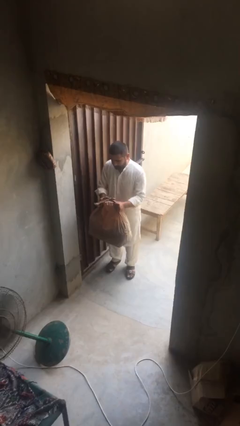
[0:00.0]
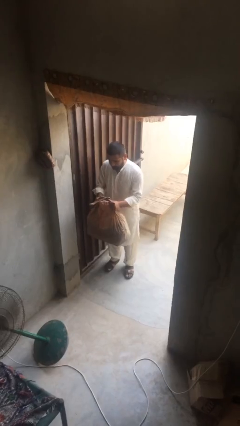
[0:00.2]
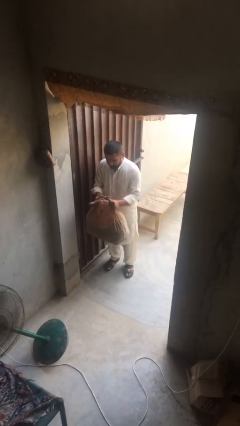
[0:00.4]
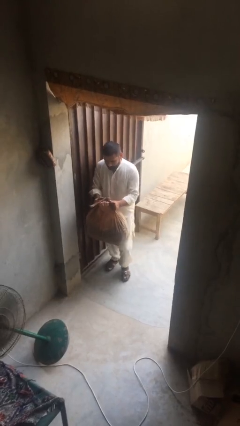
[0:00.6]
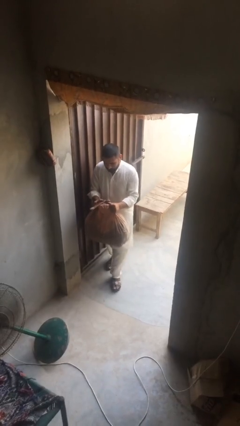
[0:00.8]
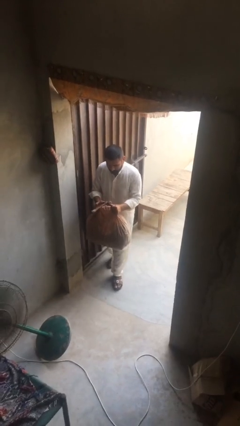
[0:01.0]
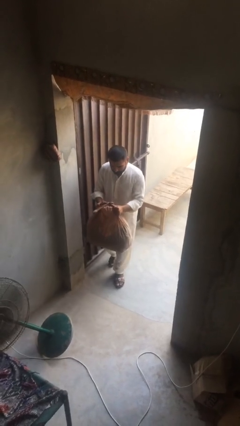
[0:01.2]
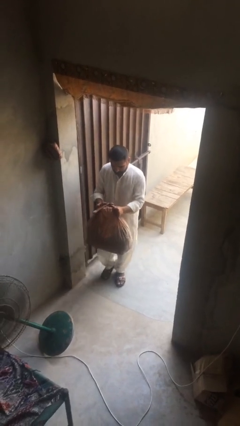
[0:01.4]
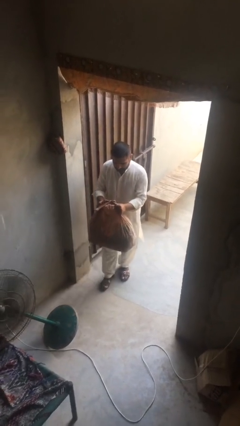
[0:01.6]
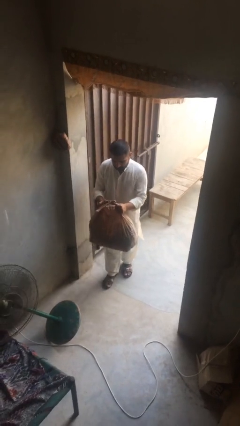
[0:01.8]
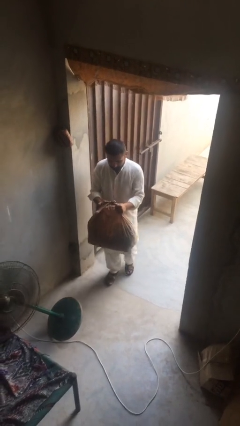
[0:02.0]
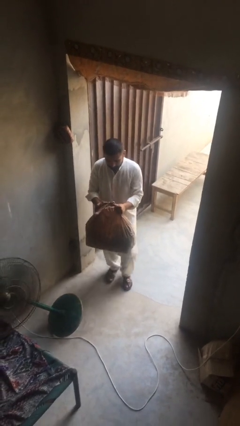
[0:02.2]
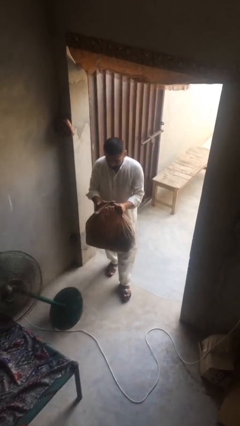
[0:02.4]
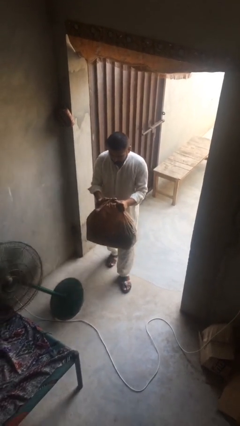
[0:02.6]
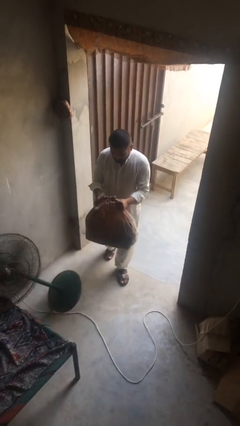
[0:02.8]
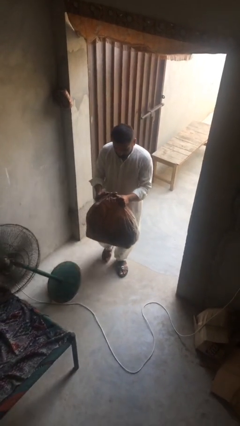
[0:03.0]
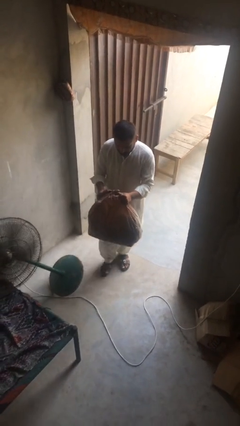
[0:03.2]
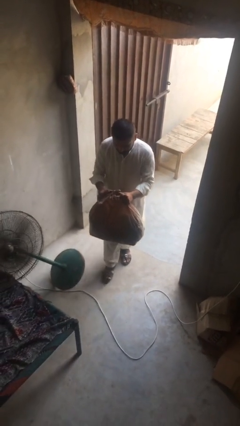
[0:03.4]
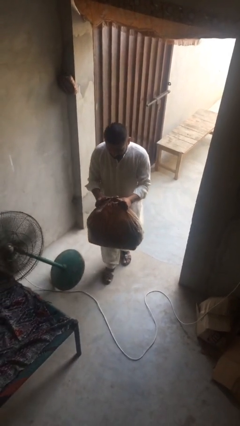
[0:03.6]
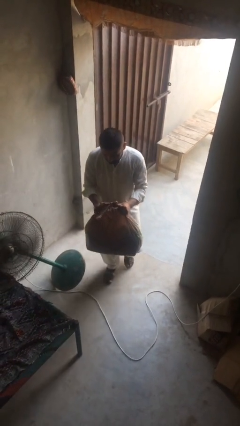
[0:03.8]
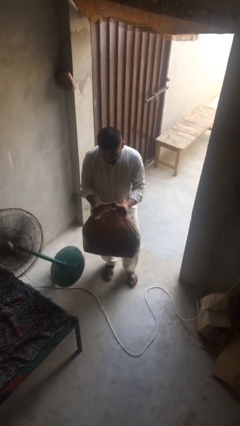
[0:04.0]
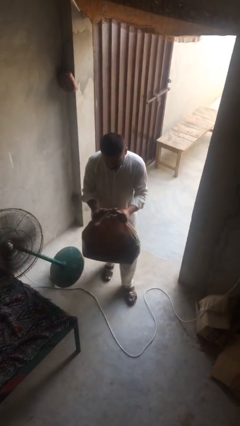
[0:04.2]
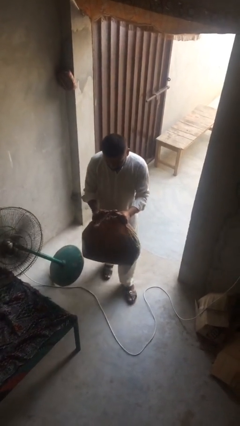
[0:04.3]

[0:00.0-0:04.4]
person carries heavy object

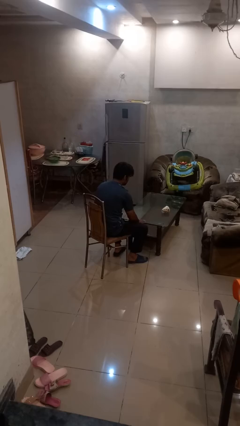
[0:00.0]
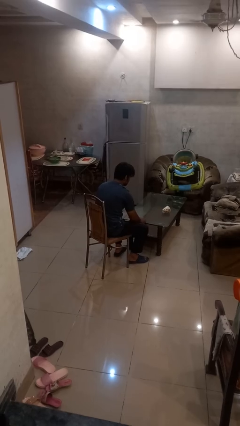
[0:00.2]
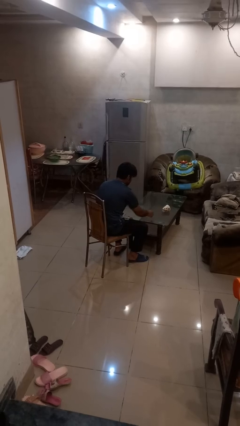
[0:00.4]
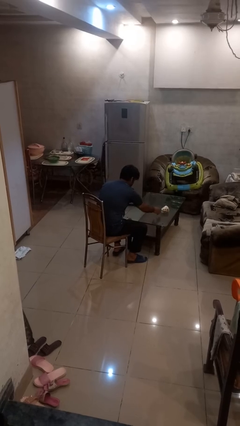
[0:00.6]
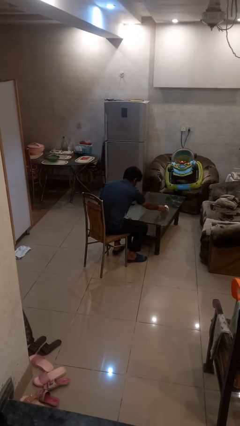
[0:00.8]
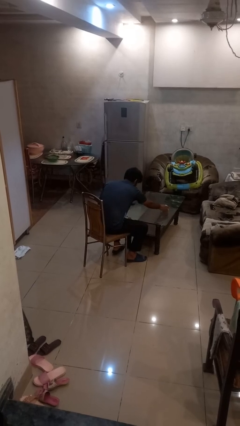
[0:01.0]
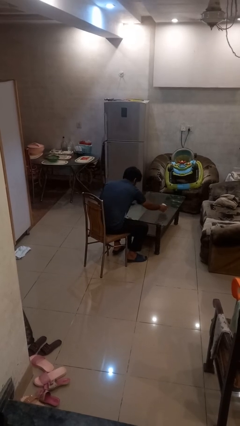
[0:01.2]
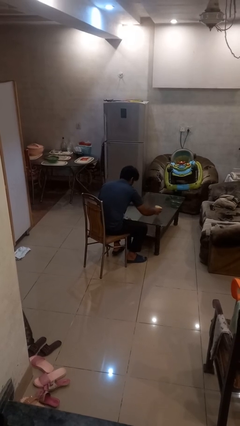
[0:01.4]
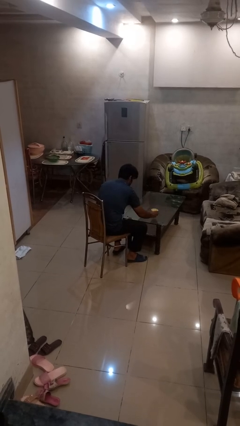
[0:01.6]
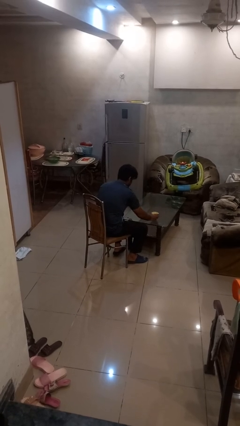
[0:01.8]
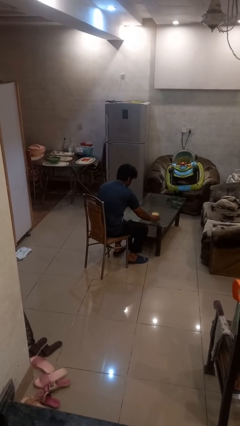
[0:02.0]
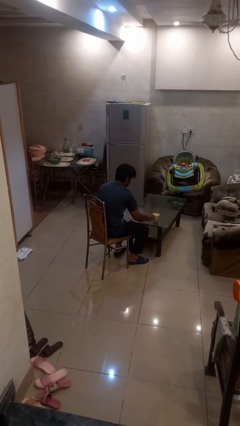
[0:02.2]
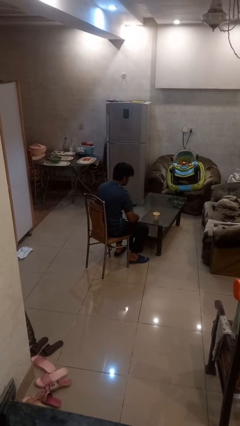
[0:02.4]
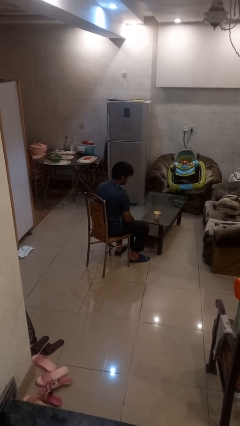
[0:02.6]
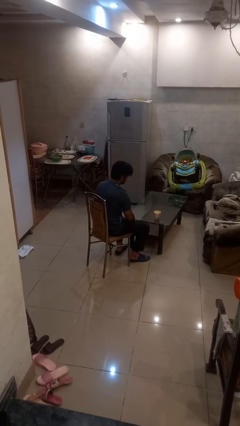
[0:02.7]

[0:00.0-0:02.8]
person sets upright glass

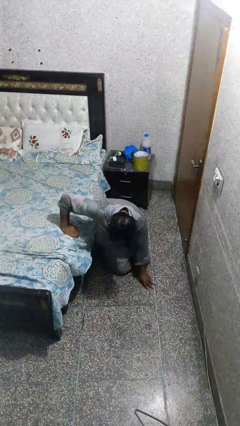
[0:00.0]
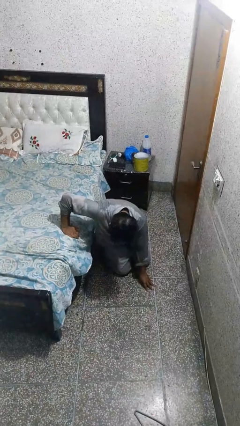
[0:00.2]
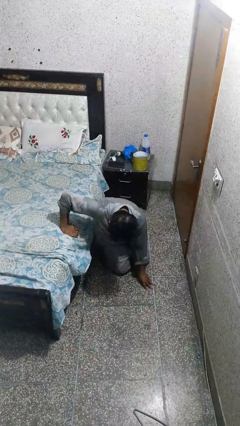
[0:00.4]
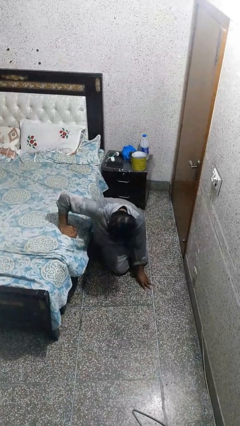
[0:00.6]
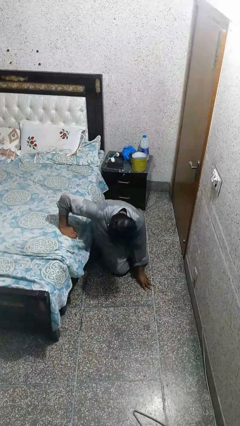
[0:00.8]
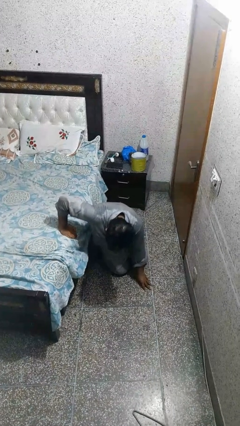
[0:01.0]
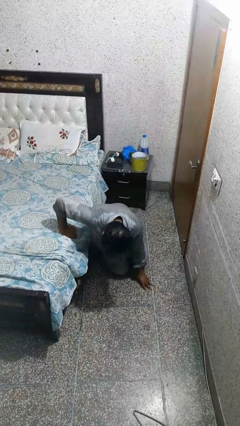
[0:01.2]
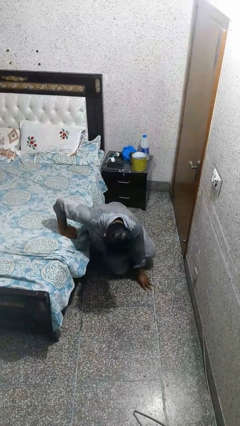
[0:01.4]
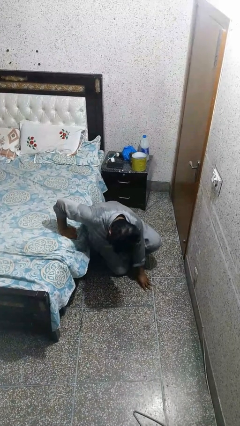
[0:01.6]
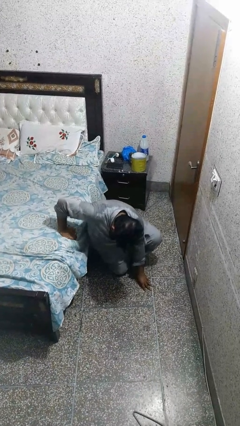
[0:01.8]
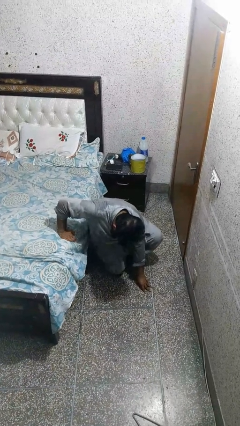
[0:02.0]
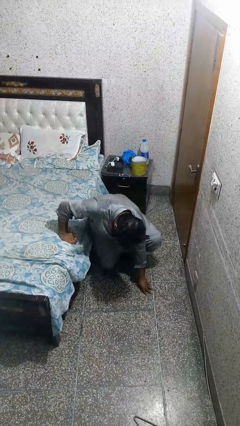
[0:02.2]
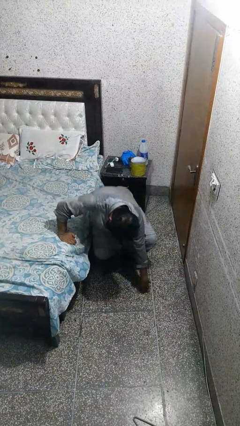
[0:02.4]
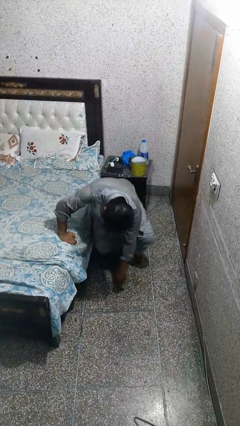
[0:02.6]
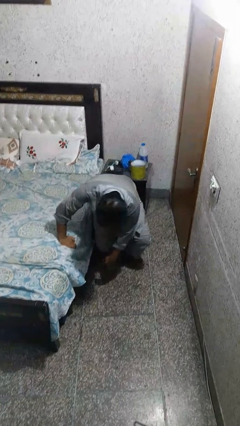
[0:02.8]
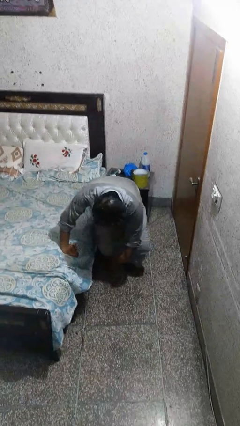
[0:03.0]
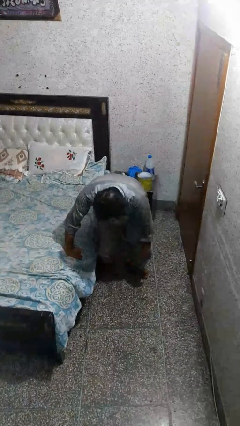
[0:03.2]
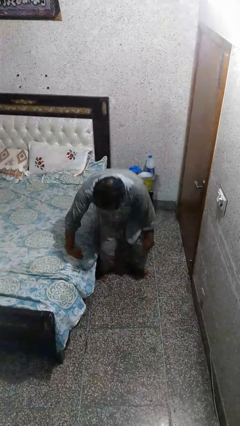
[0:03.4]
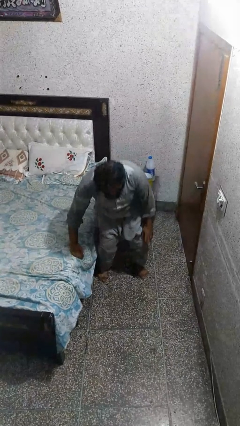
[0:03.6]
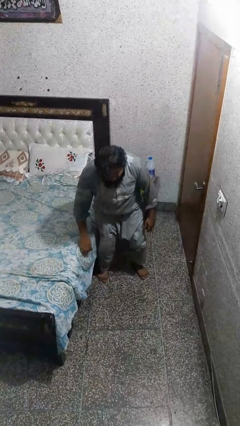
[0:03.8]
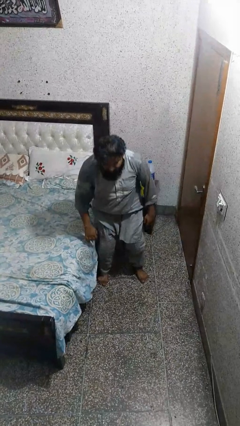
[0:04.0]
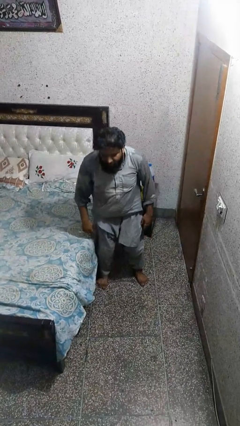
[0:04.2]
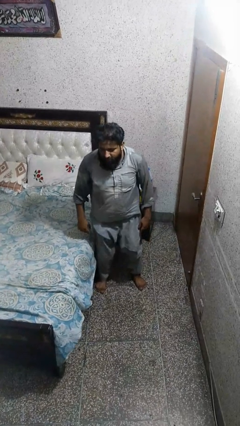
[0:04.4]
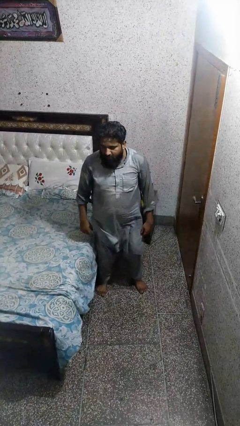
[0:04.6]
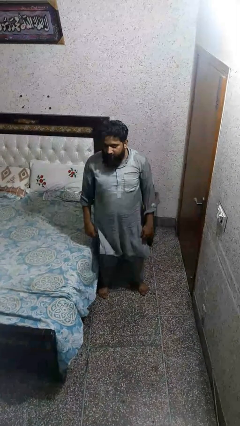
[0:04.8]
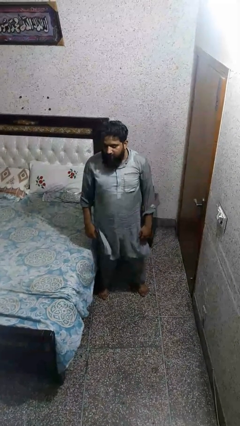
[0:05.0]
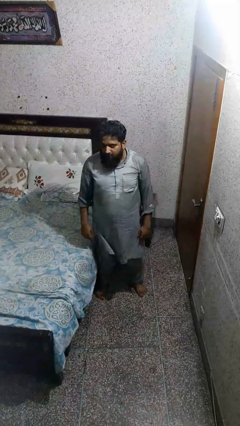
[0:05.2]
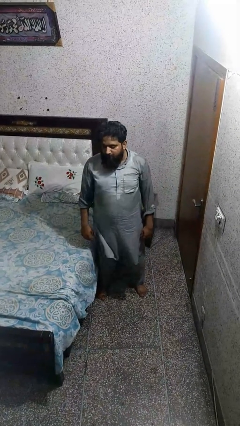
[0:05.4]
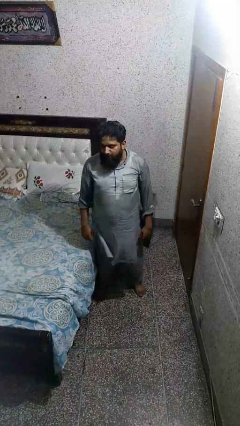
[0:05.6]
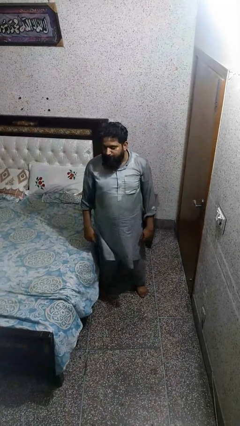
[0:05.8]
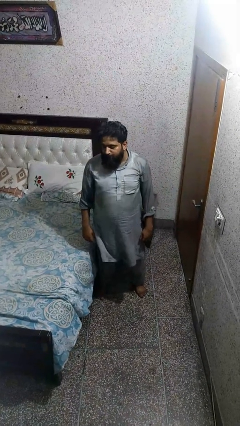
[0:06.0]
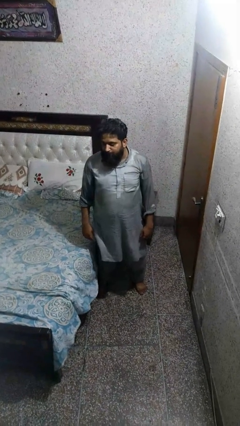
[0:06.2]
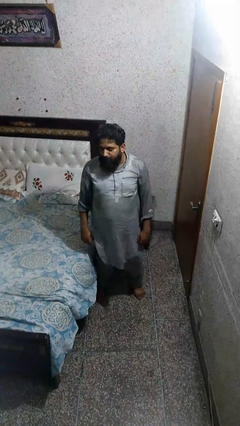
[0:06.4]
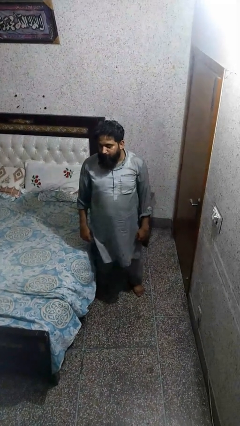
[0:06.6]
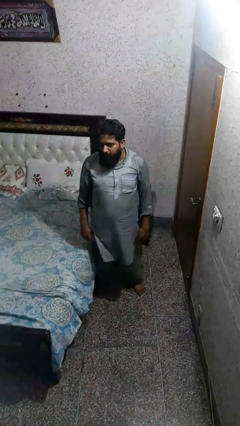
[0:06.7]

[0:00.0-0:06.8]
person stands up from floor

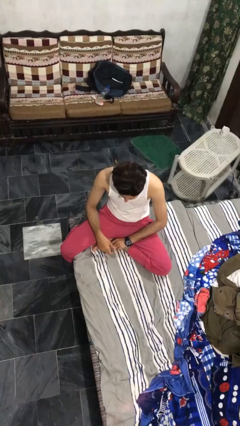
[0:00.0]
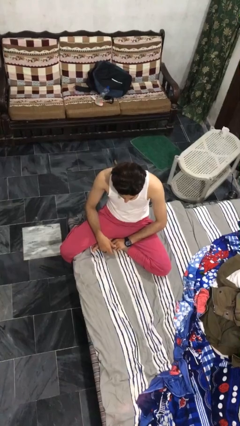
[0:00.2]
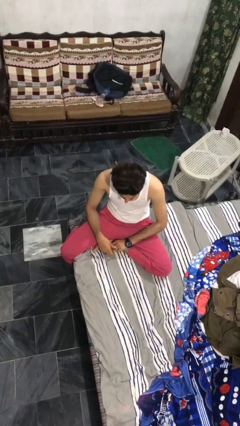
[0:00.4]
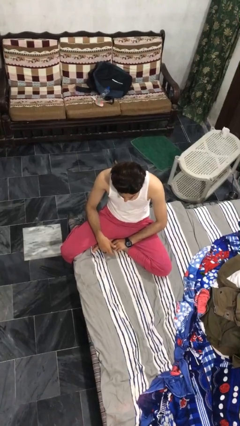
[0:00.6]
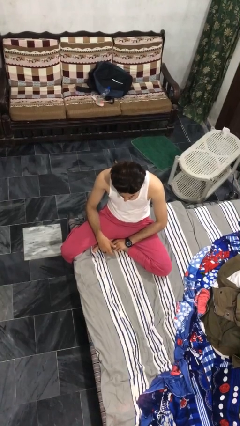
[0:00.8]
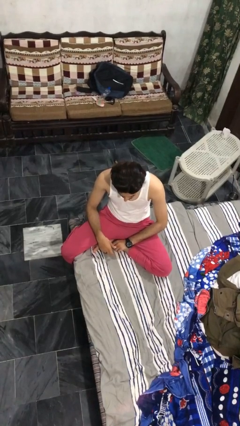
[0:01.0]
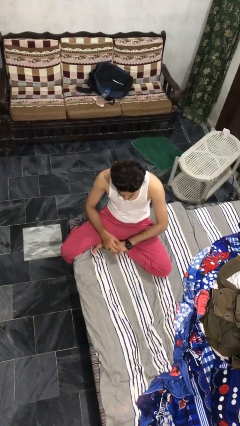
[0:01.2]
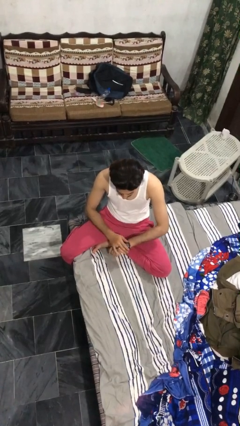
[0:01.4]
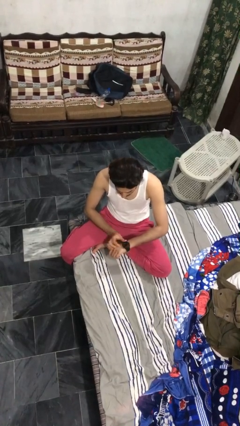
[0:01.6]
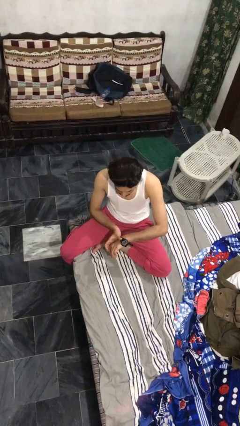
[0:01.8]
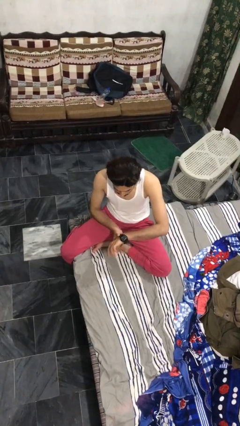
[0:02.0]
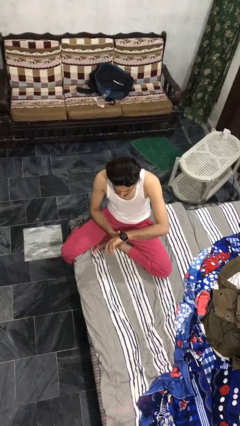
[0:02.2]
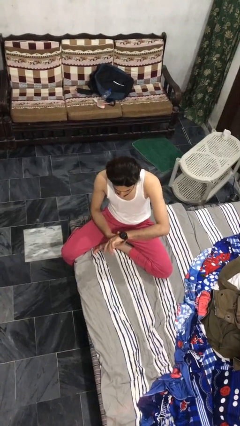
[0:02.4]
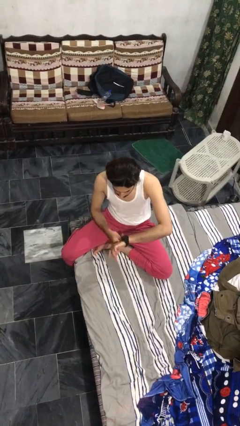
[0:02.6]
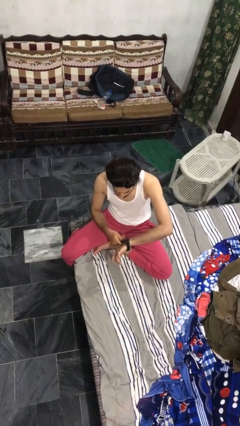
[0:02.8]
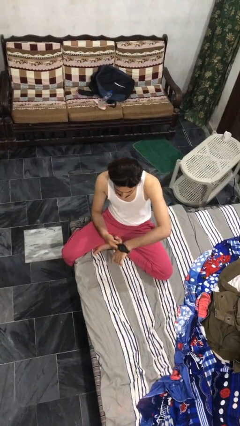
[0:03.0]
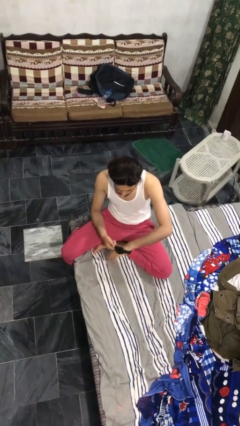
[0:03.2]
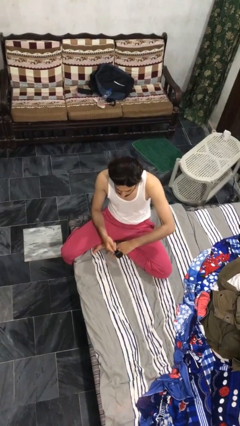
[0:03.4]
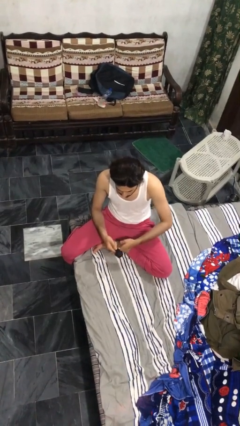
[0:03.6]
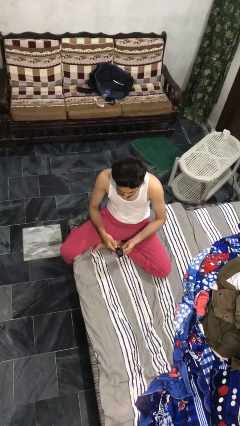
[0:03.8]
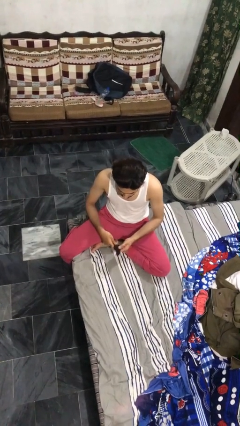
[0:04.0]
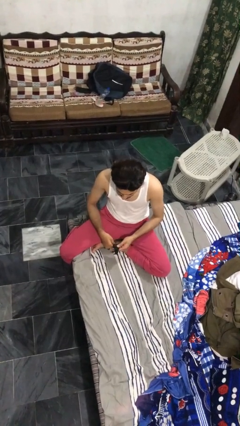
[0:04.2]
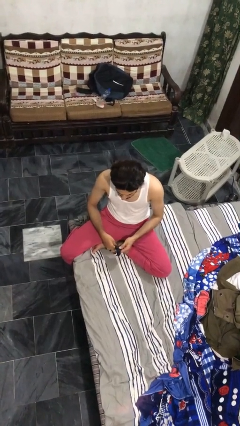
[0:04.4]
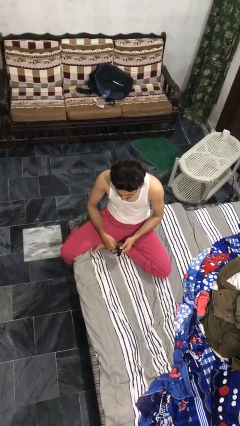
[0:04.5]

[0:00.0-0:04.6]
person takes off wristwatch
